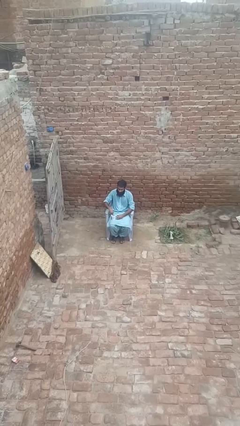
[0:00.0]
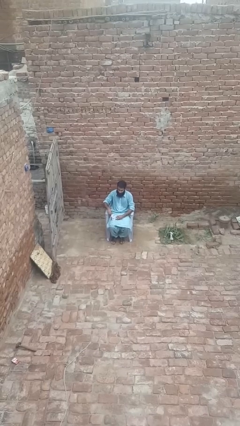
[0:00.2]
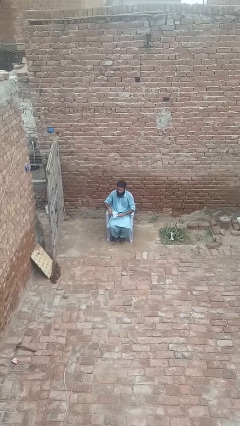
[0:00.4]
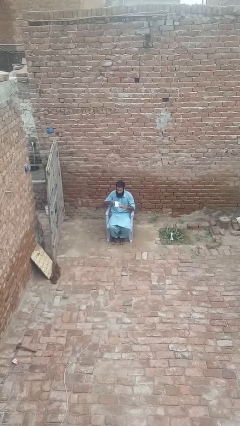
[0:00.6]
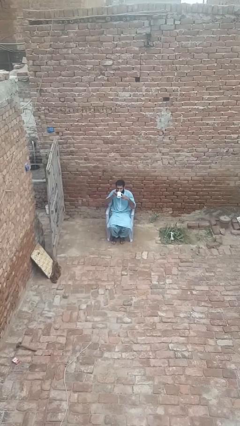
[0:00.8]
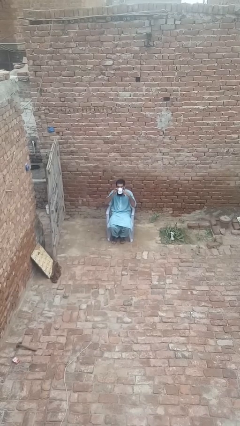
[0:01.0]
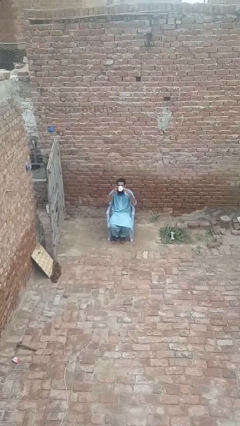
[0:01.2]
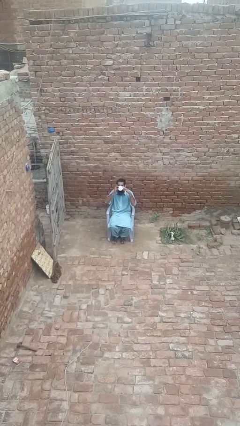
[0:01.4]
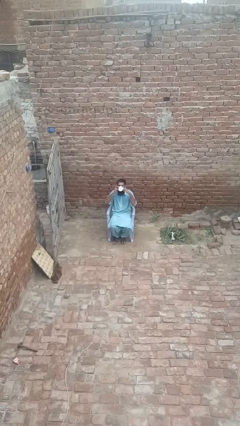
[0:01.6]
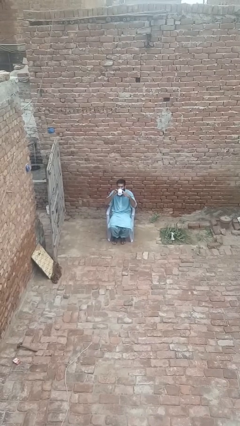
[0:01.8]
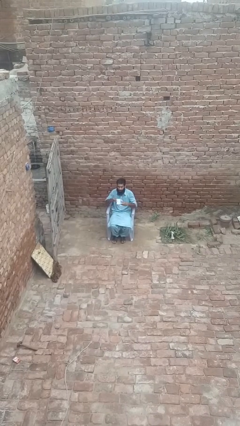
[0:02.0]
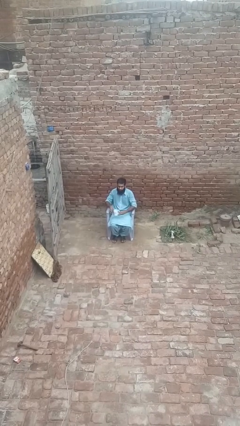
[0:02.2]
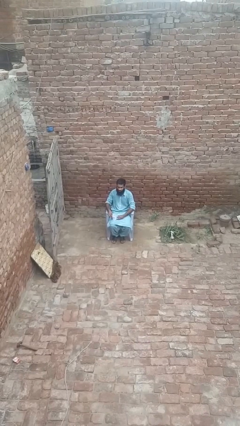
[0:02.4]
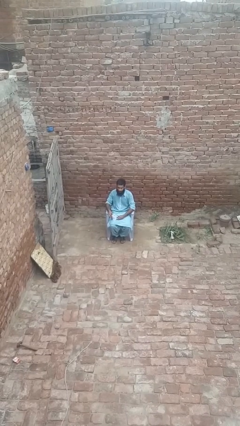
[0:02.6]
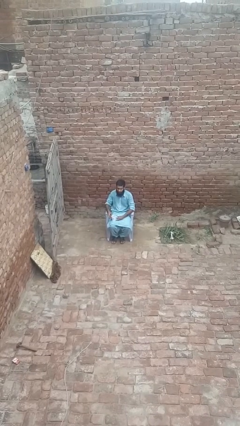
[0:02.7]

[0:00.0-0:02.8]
person drinks from mug

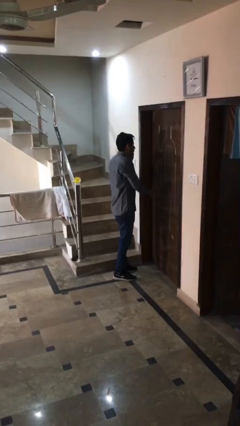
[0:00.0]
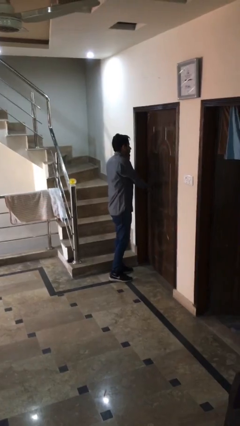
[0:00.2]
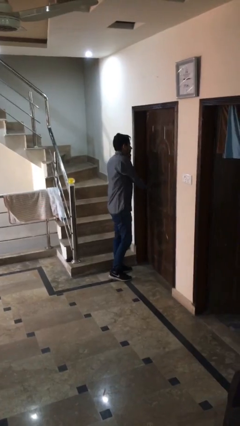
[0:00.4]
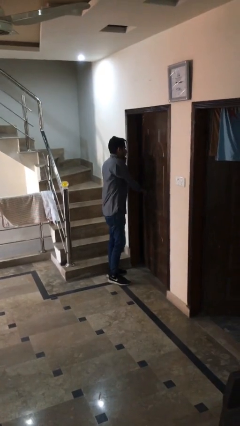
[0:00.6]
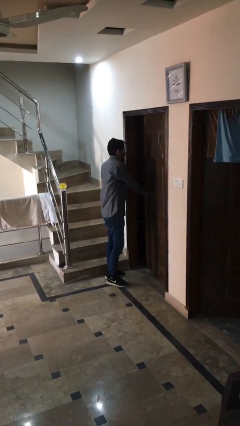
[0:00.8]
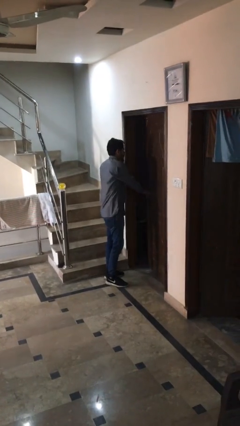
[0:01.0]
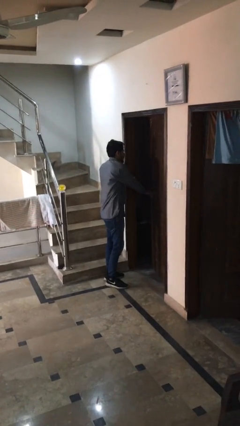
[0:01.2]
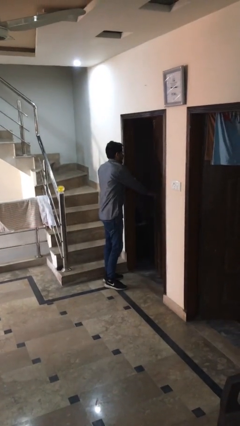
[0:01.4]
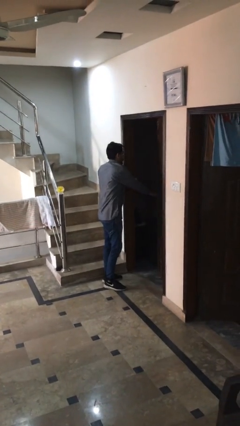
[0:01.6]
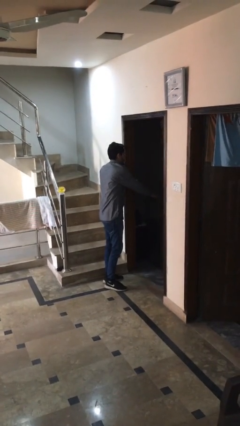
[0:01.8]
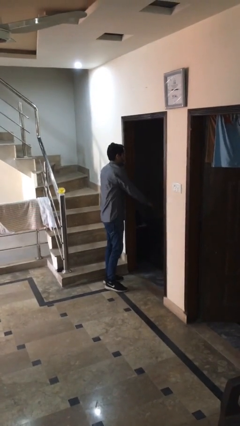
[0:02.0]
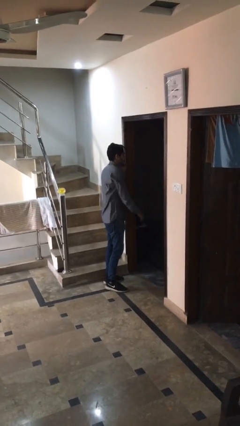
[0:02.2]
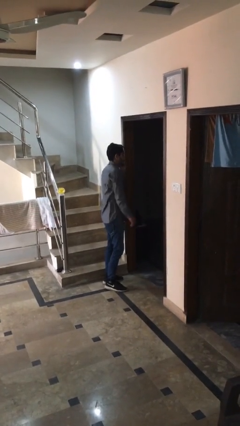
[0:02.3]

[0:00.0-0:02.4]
person opens facility door

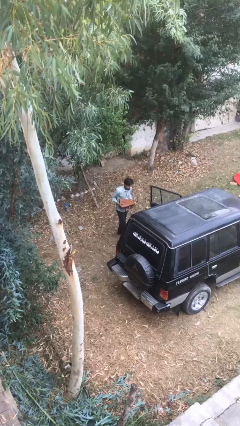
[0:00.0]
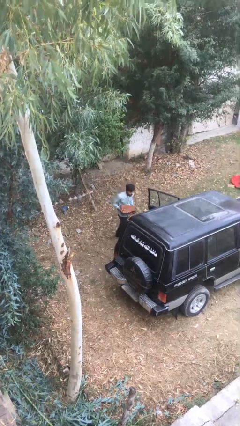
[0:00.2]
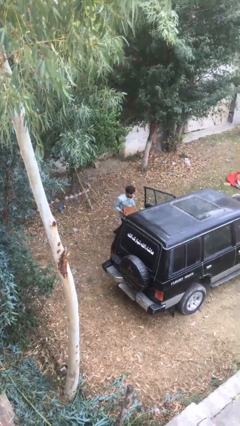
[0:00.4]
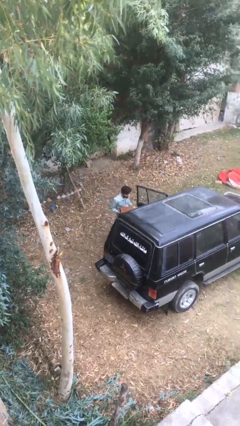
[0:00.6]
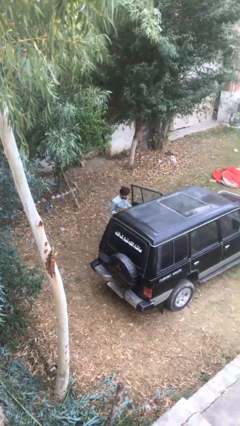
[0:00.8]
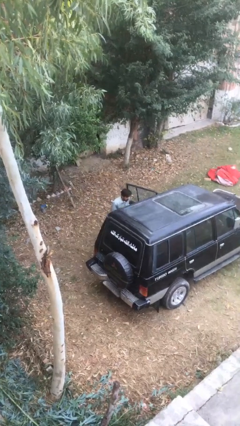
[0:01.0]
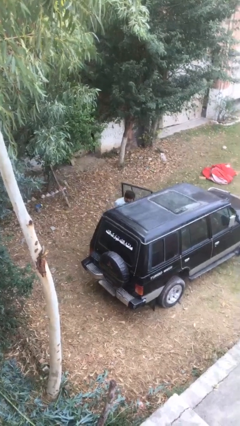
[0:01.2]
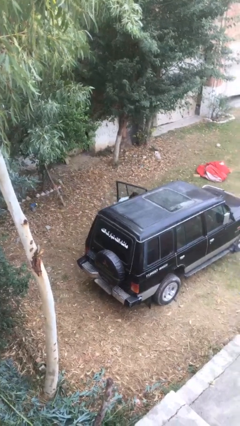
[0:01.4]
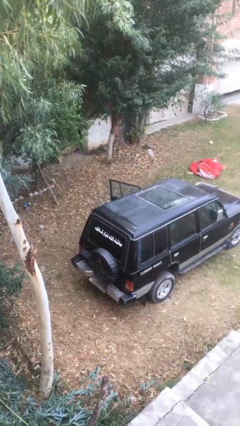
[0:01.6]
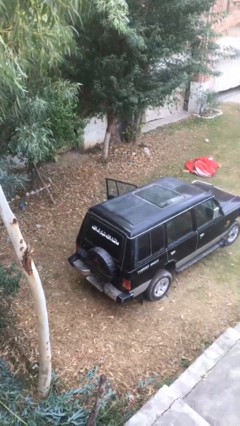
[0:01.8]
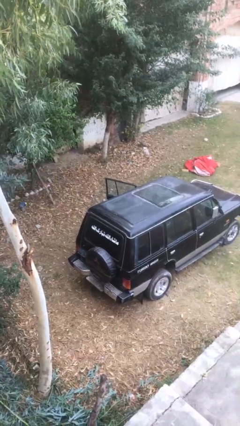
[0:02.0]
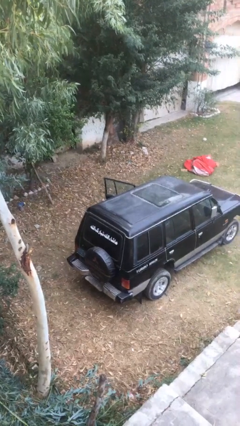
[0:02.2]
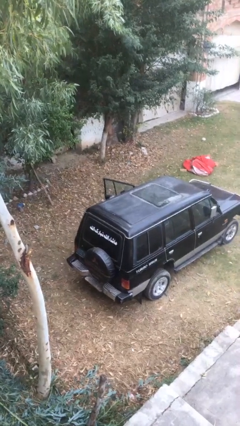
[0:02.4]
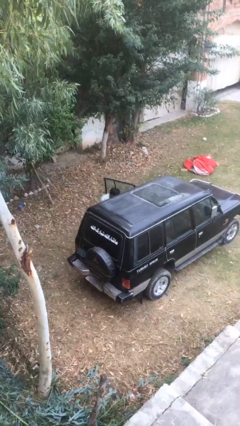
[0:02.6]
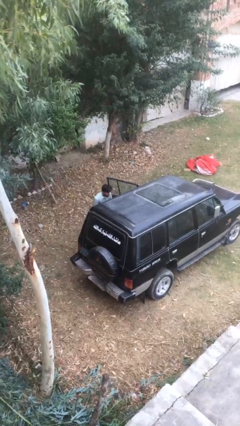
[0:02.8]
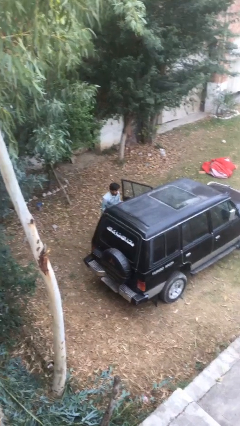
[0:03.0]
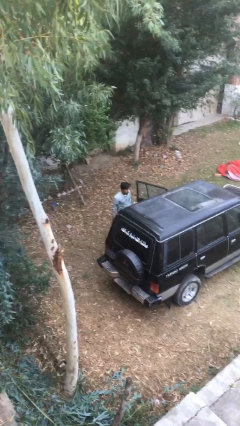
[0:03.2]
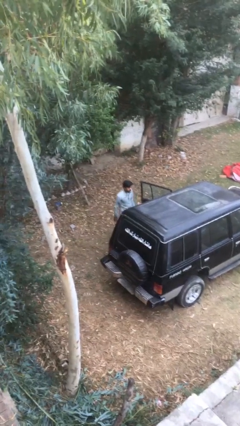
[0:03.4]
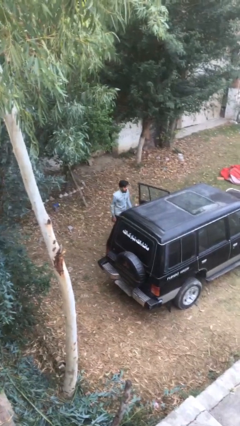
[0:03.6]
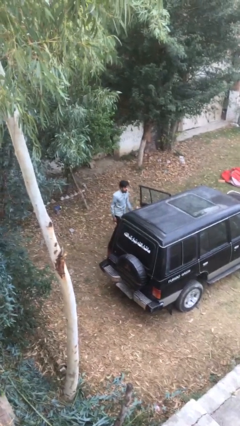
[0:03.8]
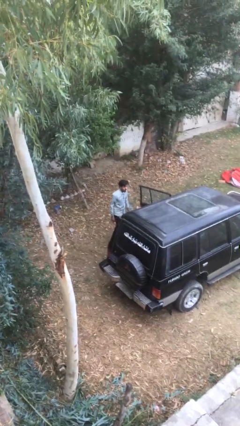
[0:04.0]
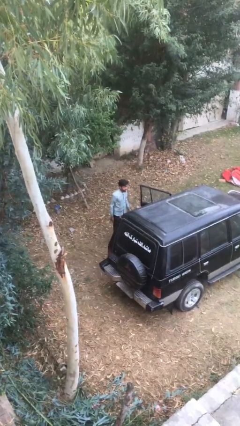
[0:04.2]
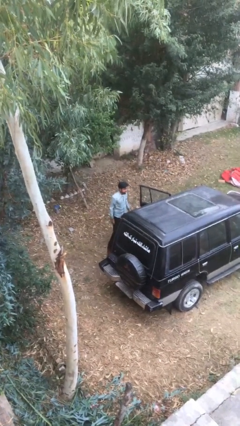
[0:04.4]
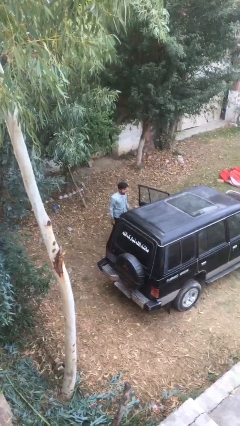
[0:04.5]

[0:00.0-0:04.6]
person loads car

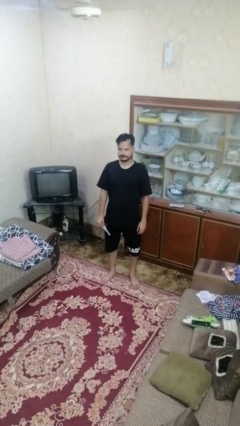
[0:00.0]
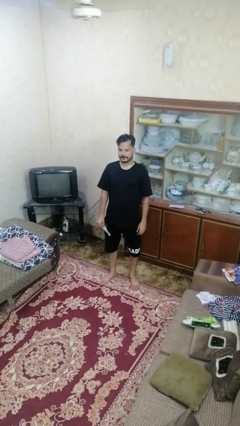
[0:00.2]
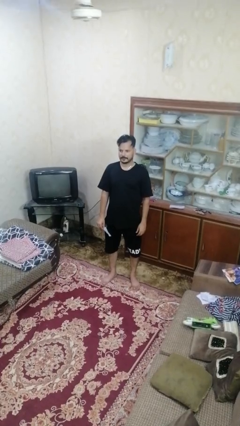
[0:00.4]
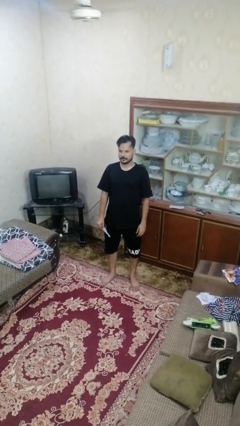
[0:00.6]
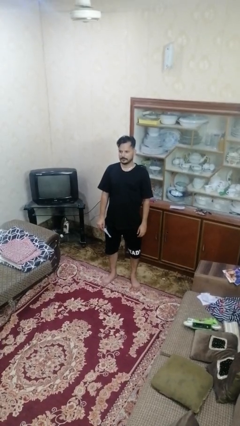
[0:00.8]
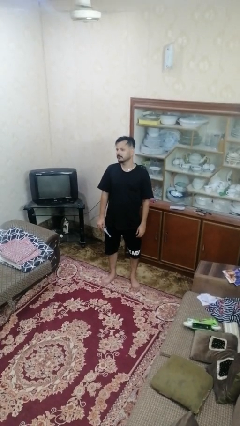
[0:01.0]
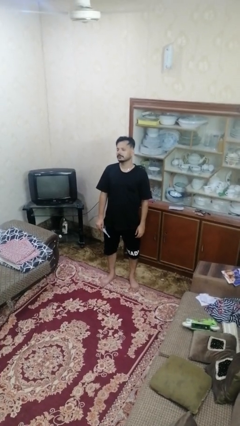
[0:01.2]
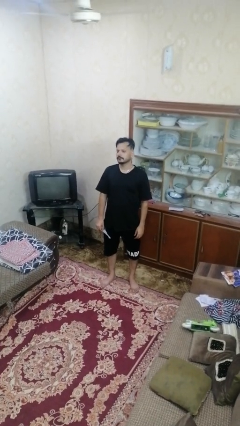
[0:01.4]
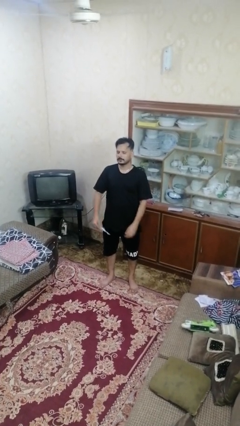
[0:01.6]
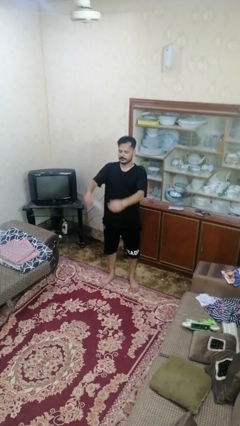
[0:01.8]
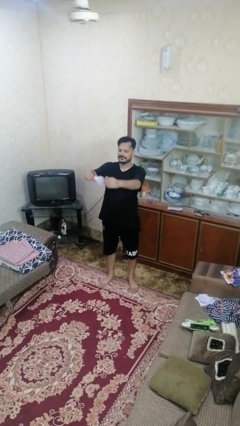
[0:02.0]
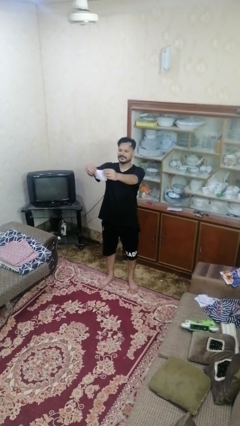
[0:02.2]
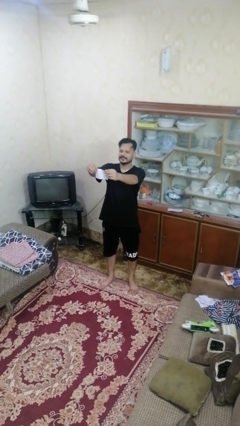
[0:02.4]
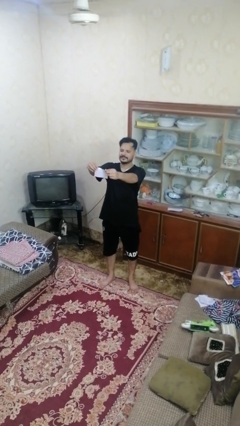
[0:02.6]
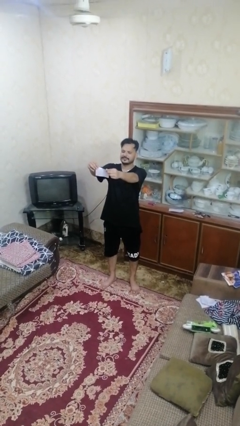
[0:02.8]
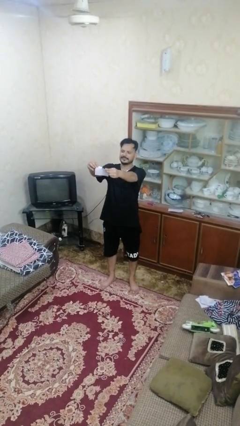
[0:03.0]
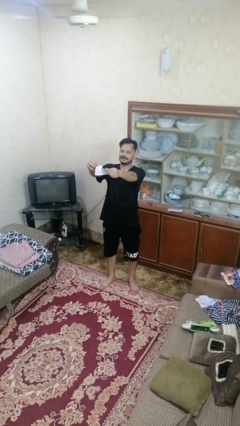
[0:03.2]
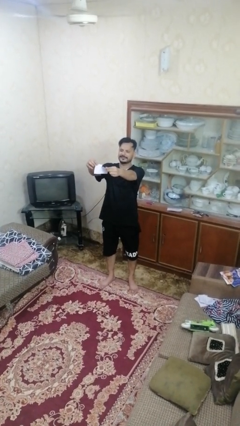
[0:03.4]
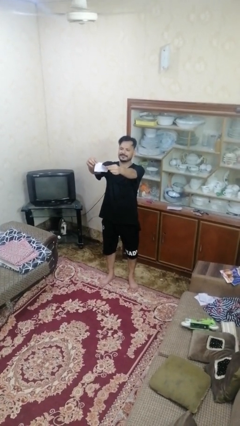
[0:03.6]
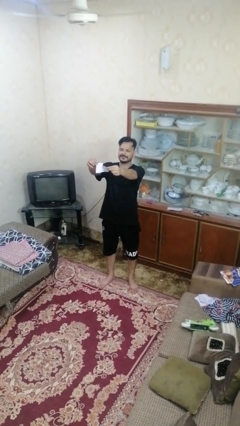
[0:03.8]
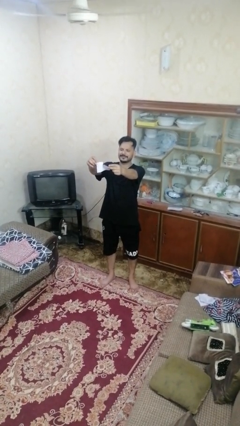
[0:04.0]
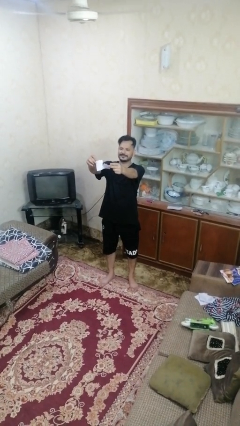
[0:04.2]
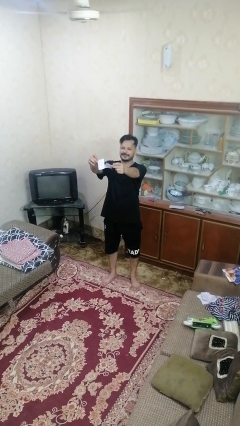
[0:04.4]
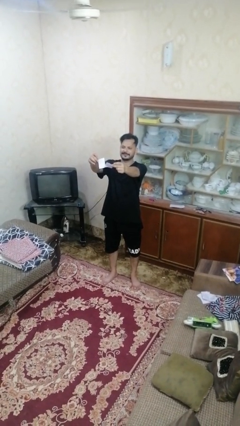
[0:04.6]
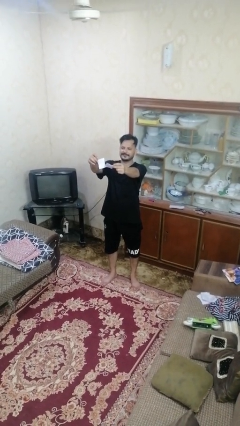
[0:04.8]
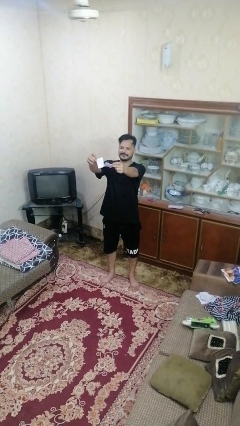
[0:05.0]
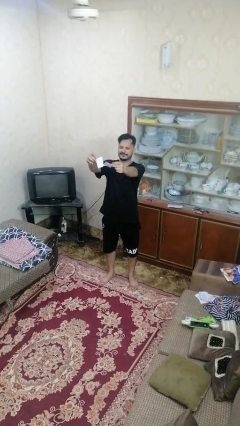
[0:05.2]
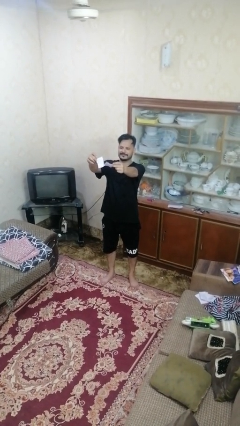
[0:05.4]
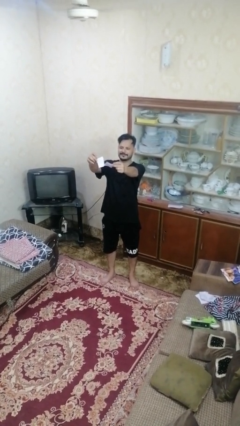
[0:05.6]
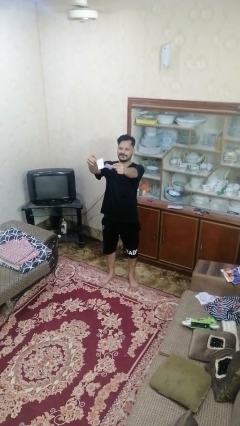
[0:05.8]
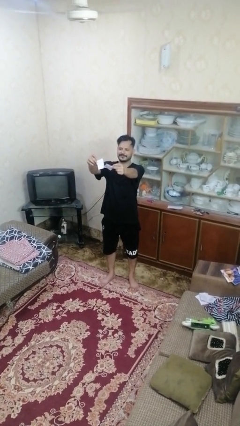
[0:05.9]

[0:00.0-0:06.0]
person tears paper

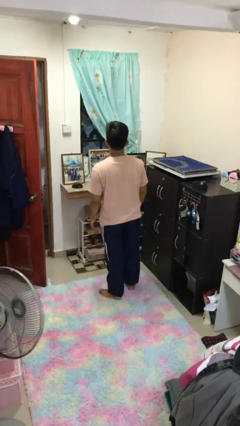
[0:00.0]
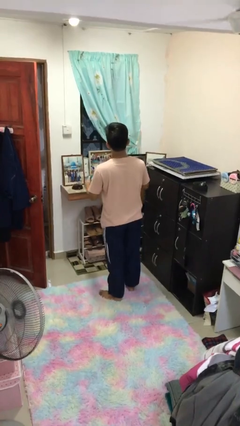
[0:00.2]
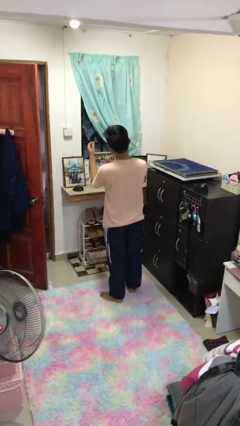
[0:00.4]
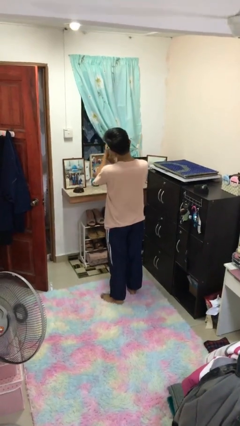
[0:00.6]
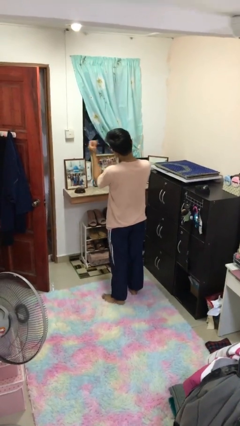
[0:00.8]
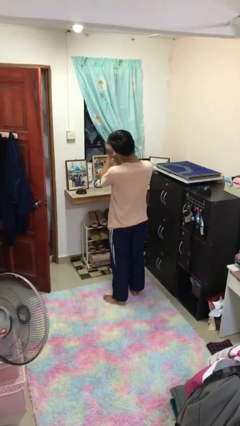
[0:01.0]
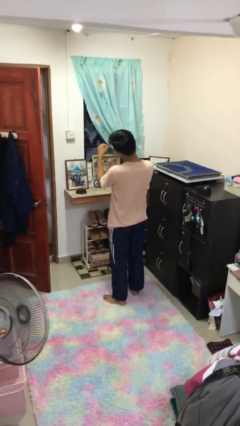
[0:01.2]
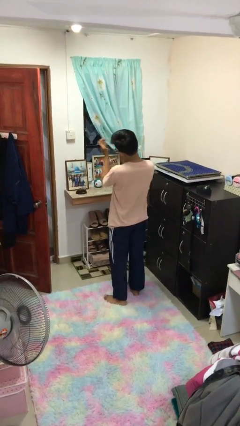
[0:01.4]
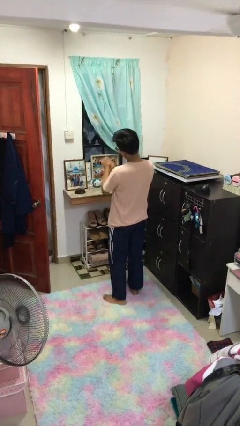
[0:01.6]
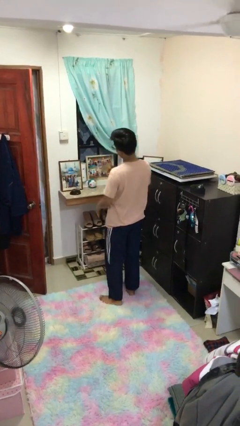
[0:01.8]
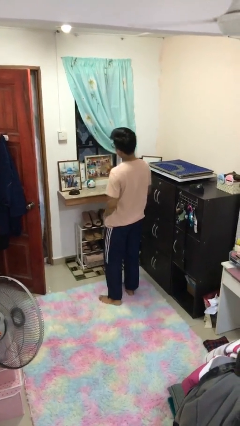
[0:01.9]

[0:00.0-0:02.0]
person claps hands

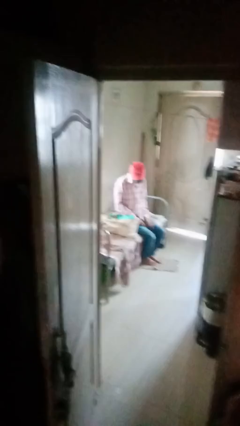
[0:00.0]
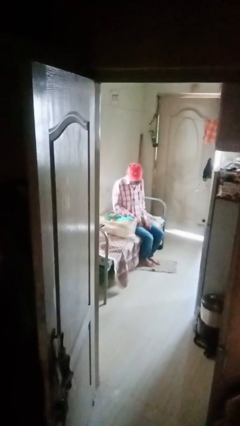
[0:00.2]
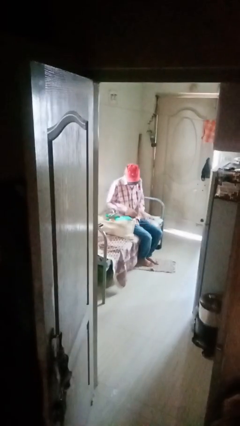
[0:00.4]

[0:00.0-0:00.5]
person searches in bag
